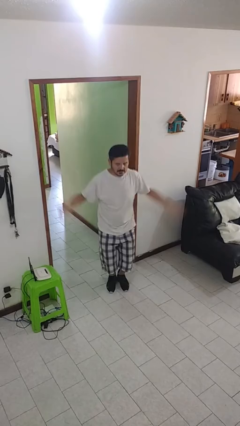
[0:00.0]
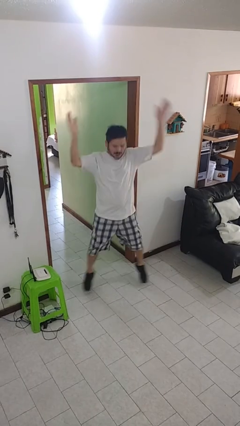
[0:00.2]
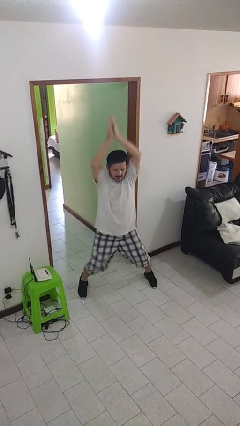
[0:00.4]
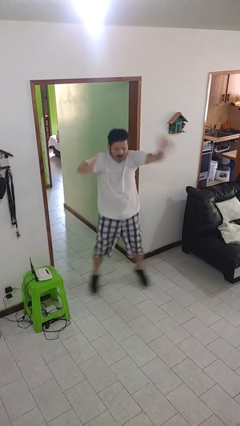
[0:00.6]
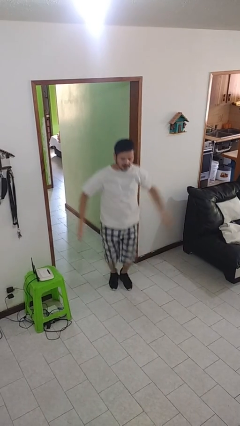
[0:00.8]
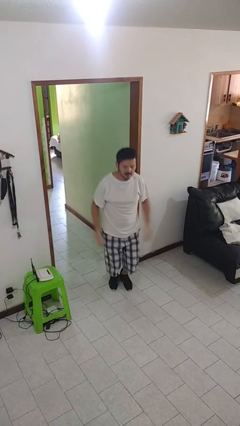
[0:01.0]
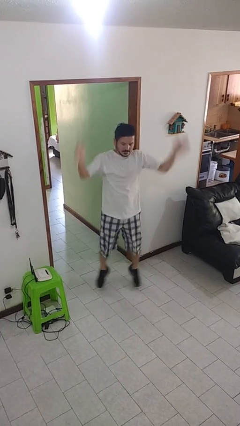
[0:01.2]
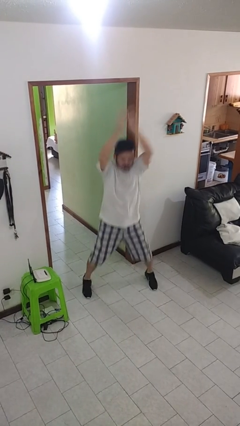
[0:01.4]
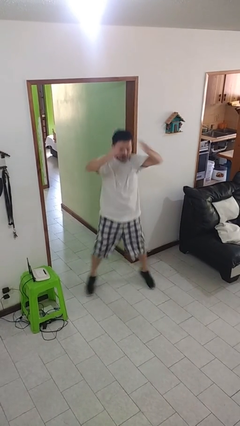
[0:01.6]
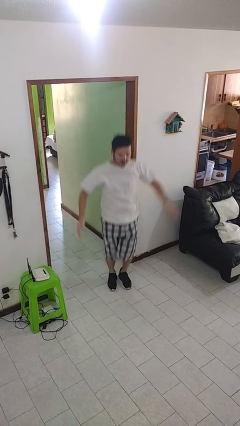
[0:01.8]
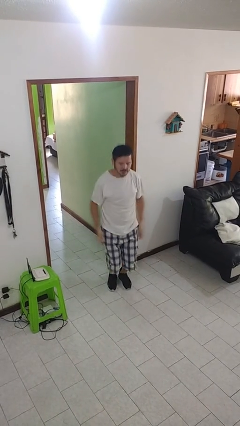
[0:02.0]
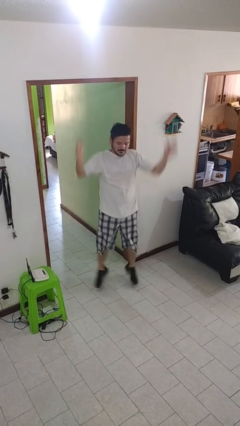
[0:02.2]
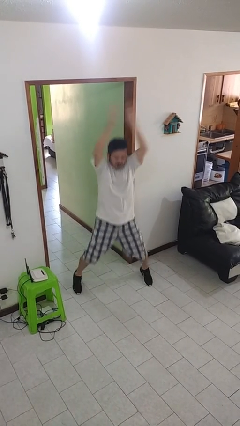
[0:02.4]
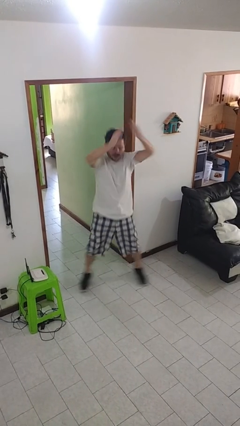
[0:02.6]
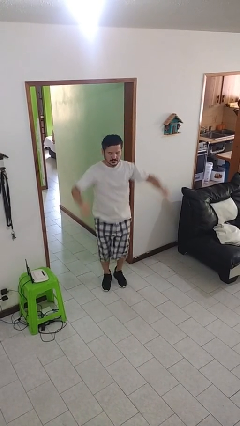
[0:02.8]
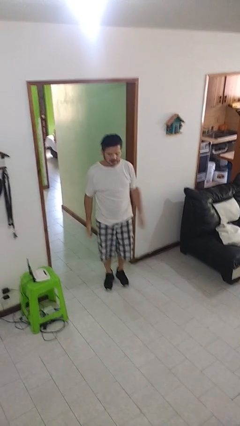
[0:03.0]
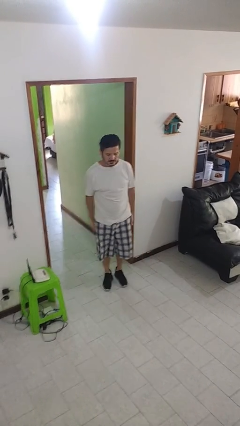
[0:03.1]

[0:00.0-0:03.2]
person exercises with jumping jacks

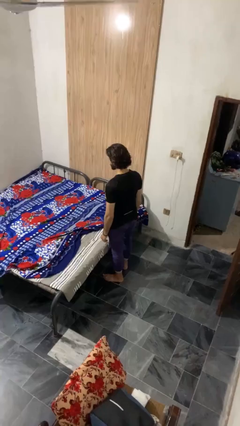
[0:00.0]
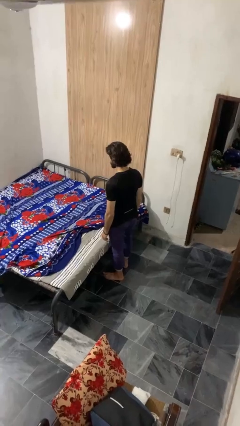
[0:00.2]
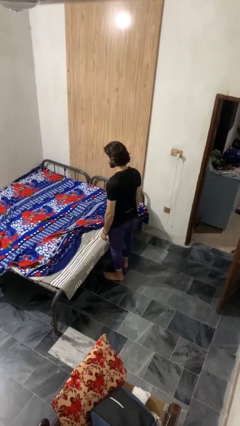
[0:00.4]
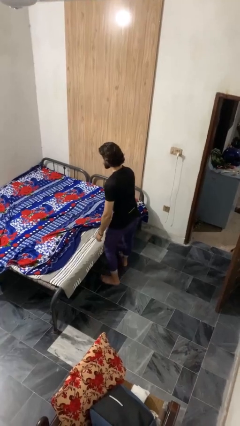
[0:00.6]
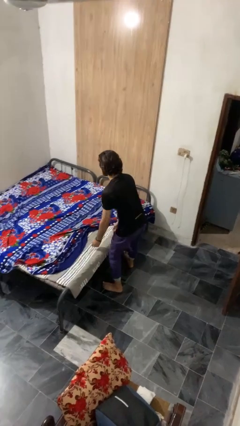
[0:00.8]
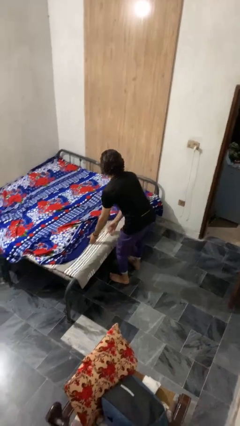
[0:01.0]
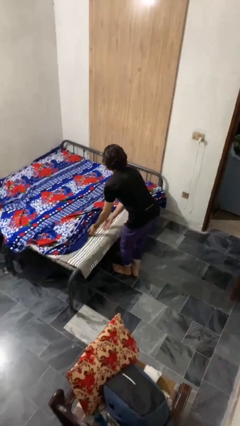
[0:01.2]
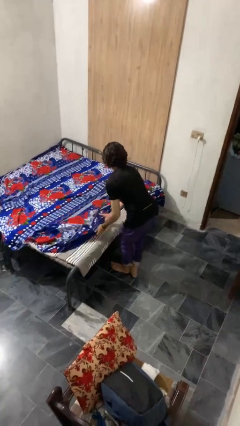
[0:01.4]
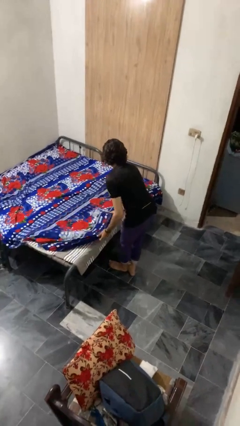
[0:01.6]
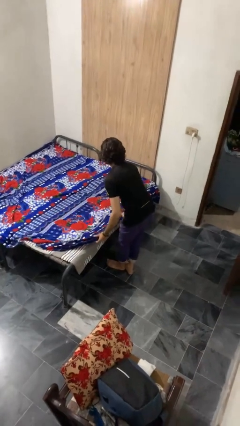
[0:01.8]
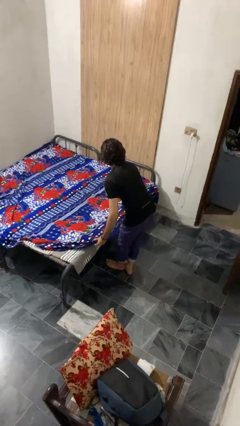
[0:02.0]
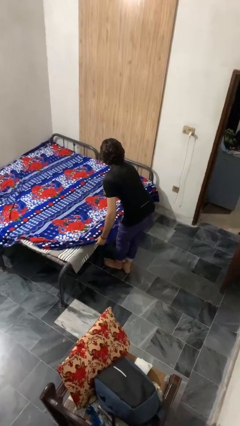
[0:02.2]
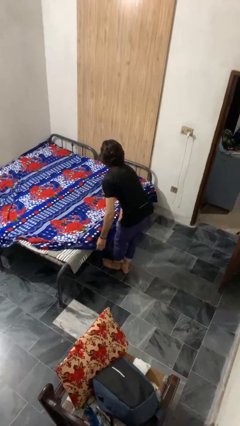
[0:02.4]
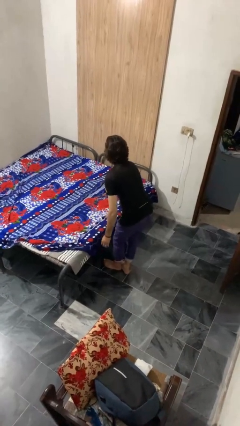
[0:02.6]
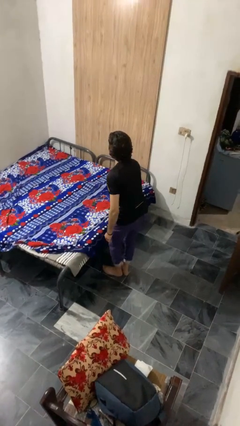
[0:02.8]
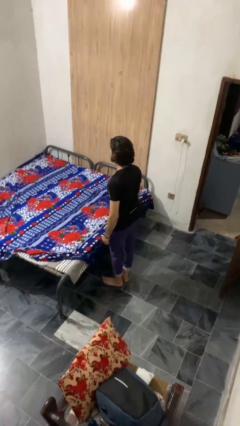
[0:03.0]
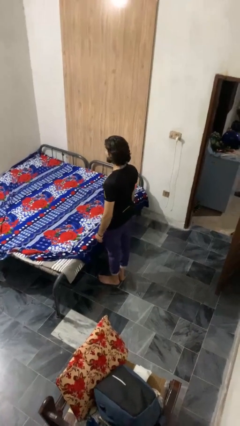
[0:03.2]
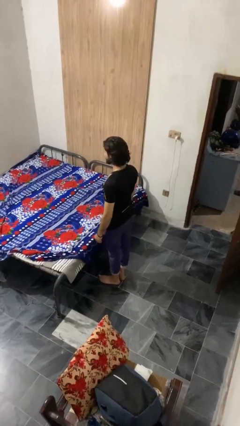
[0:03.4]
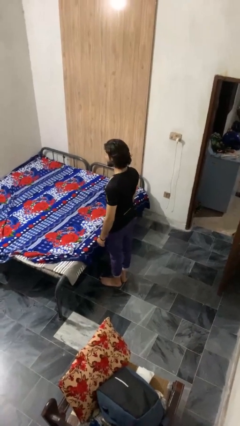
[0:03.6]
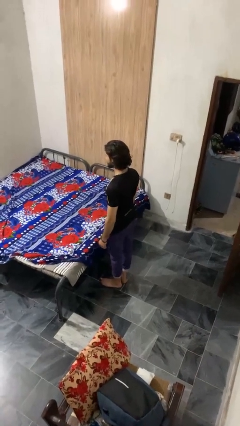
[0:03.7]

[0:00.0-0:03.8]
person makes bed

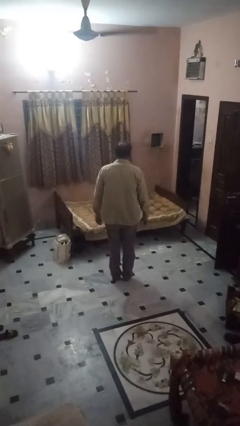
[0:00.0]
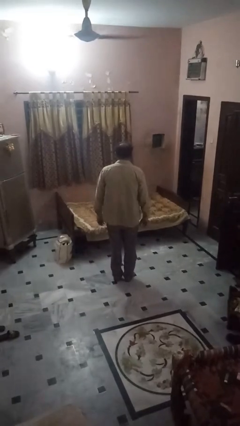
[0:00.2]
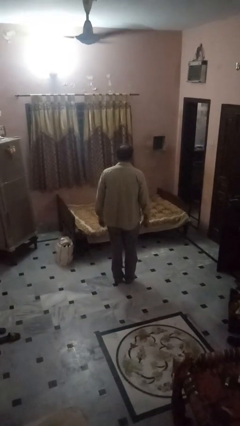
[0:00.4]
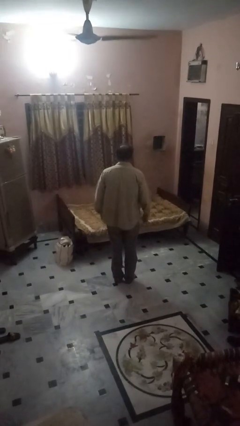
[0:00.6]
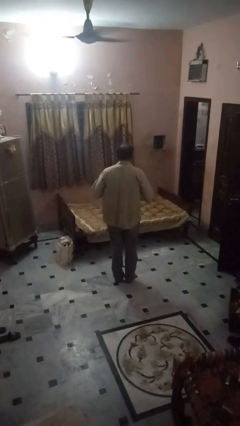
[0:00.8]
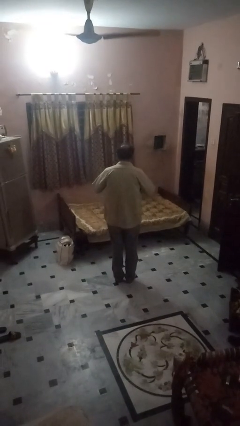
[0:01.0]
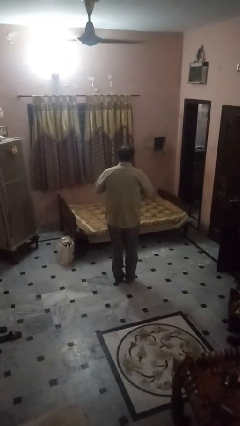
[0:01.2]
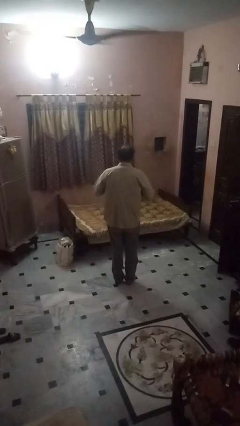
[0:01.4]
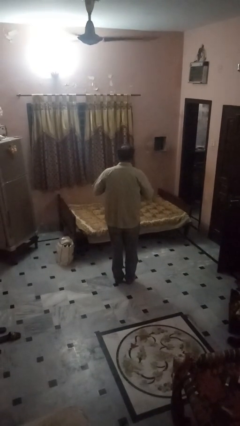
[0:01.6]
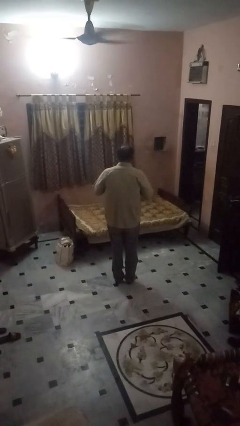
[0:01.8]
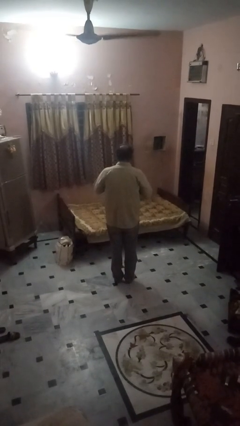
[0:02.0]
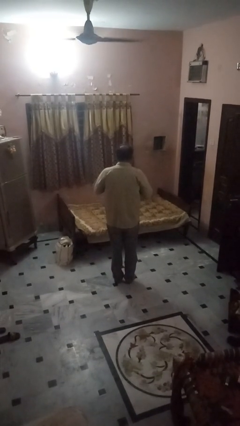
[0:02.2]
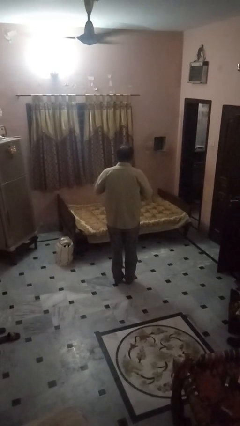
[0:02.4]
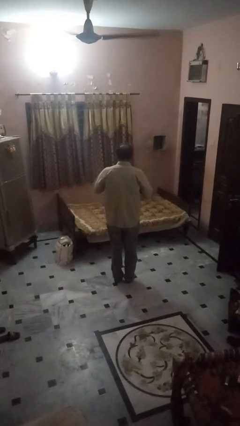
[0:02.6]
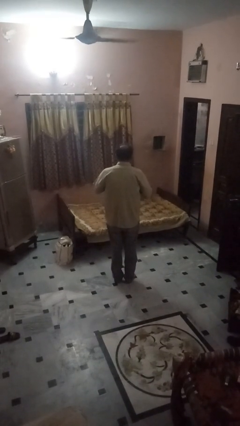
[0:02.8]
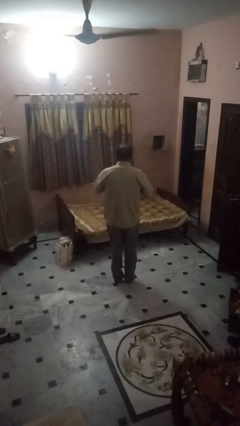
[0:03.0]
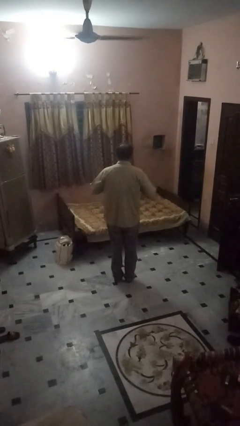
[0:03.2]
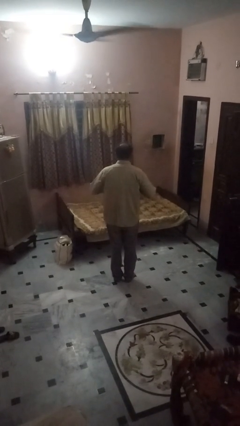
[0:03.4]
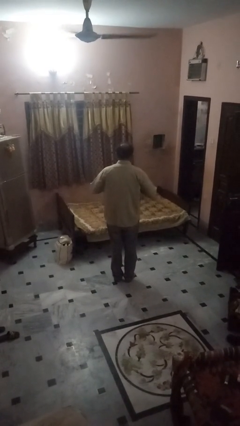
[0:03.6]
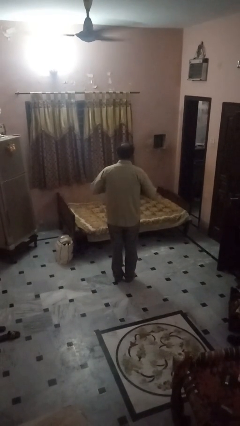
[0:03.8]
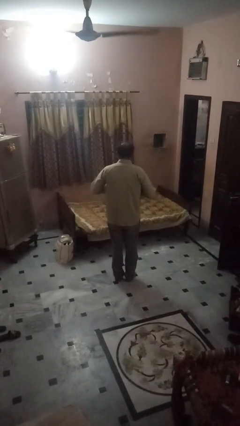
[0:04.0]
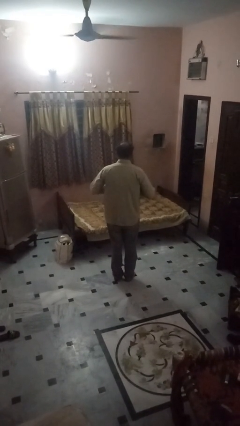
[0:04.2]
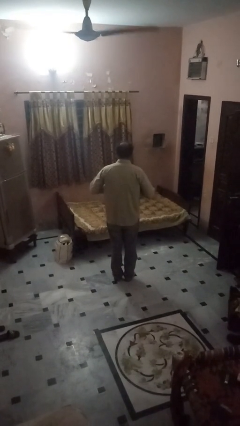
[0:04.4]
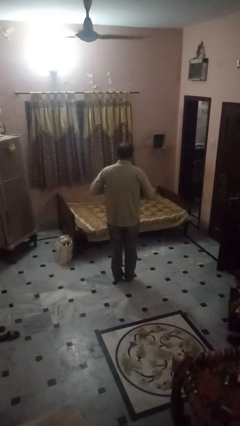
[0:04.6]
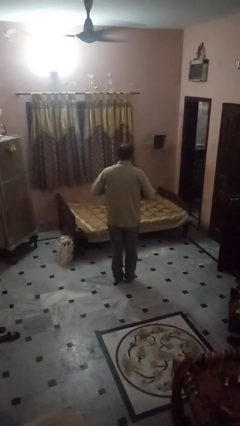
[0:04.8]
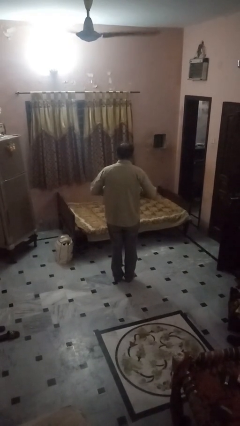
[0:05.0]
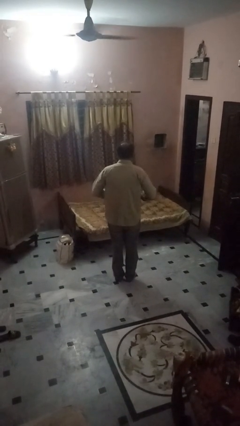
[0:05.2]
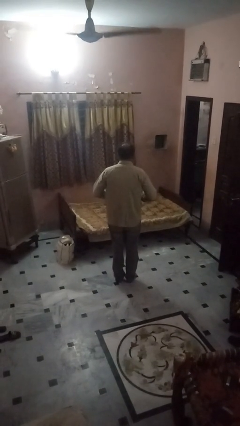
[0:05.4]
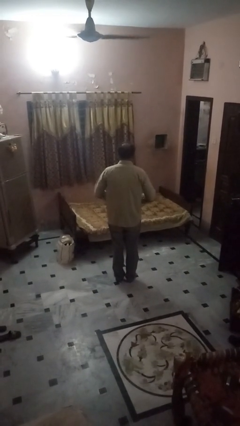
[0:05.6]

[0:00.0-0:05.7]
person buttons shirt

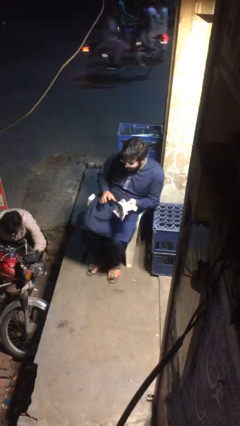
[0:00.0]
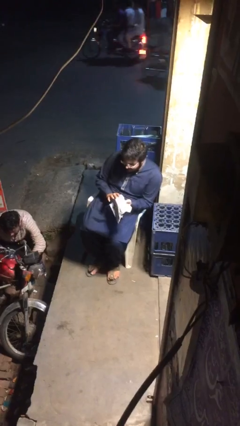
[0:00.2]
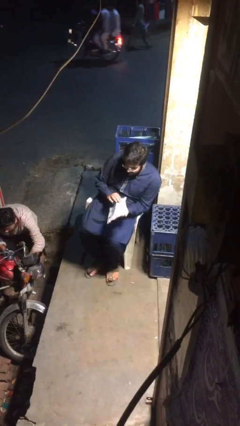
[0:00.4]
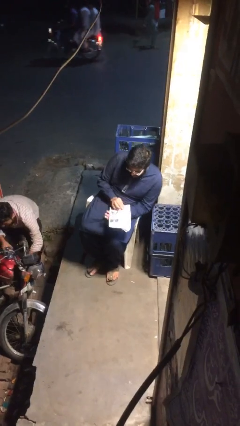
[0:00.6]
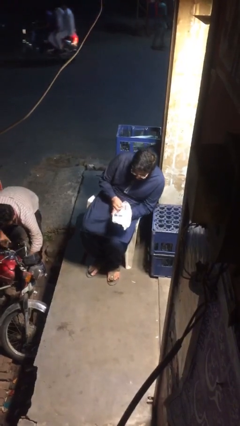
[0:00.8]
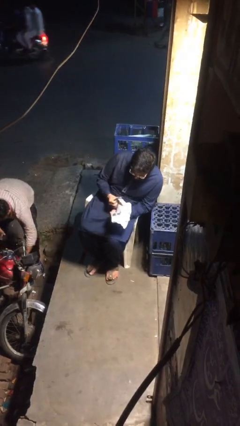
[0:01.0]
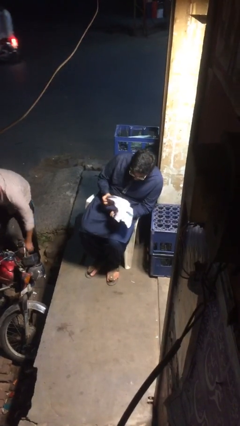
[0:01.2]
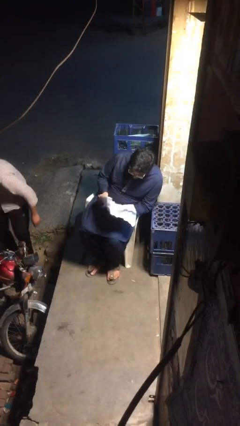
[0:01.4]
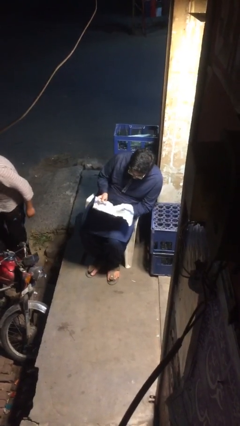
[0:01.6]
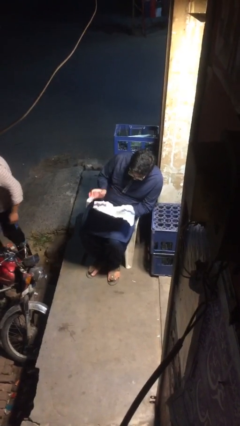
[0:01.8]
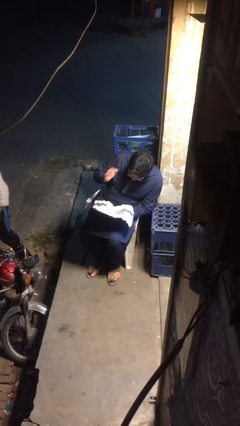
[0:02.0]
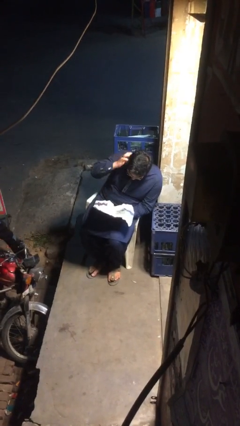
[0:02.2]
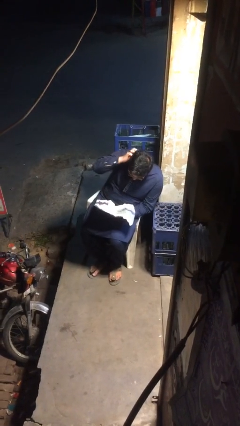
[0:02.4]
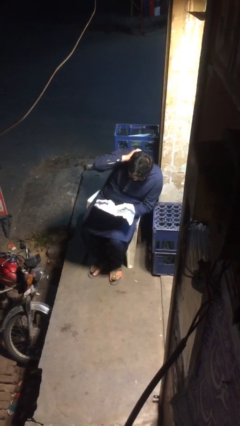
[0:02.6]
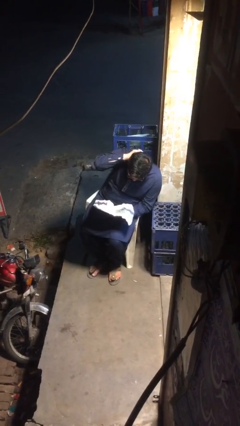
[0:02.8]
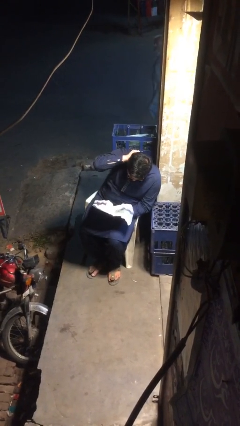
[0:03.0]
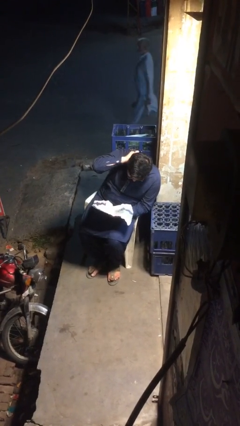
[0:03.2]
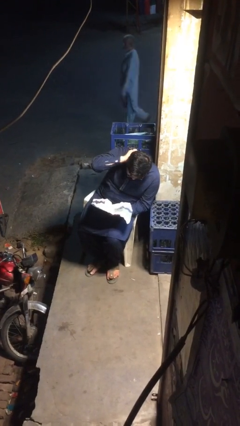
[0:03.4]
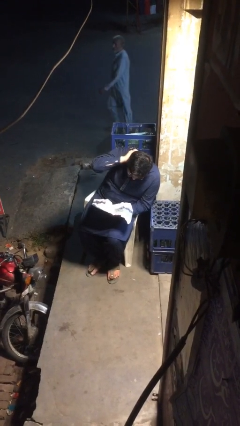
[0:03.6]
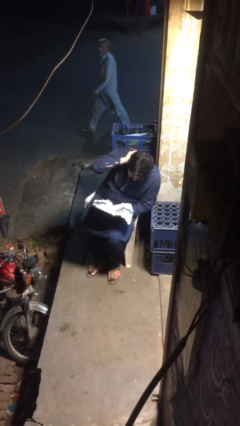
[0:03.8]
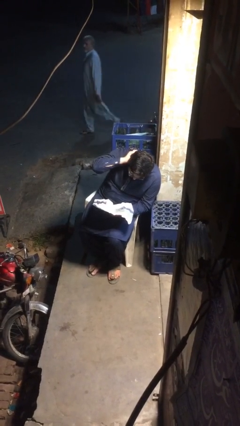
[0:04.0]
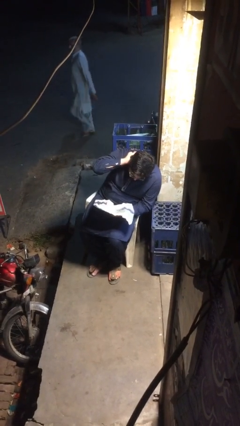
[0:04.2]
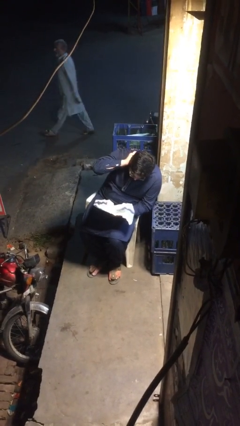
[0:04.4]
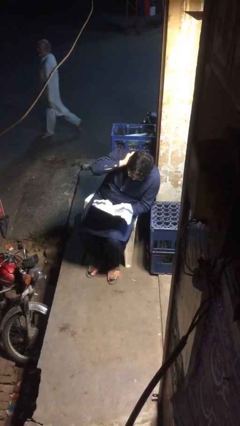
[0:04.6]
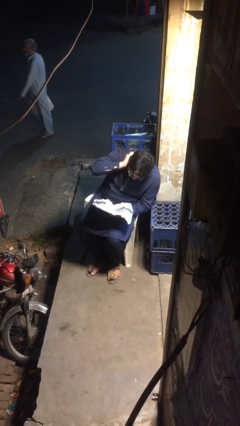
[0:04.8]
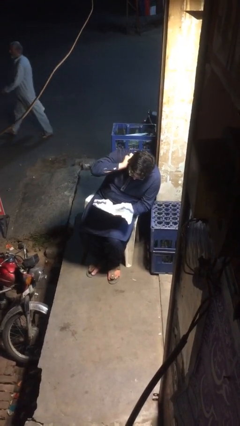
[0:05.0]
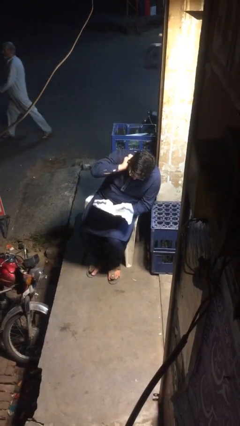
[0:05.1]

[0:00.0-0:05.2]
person reads document
